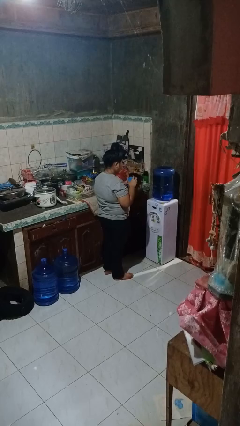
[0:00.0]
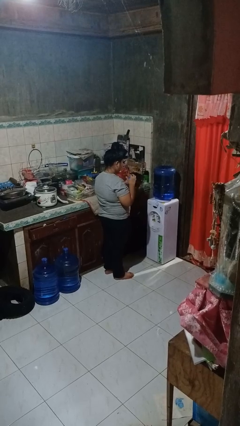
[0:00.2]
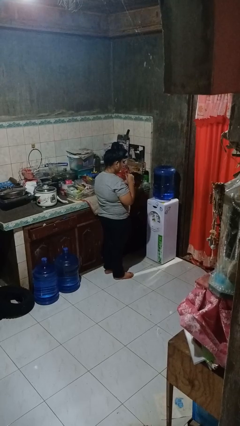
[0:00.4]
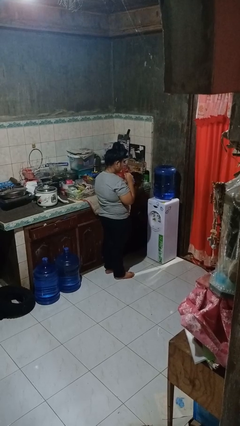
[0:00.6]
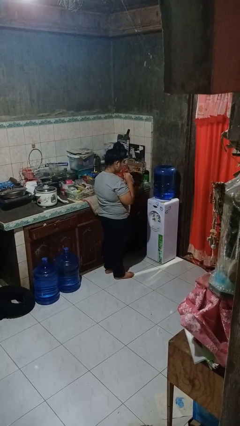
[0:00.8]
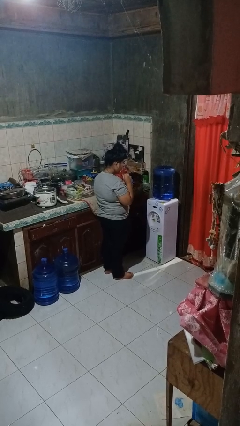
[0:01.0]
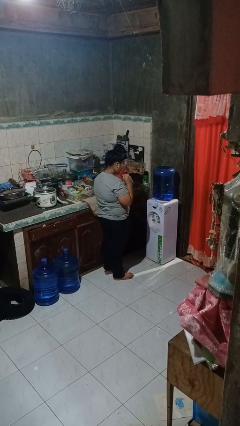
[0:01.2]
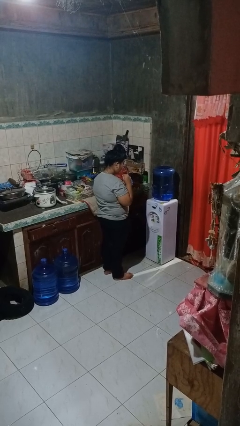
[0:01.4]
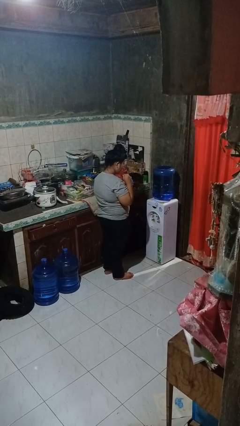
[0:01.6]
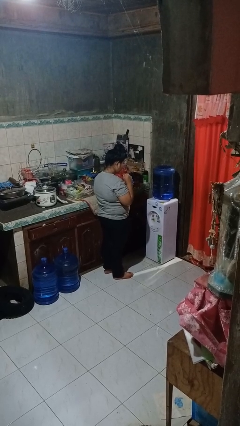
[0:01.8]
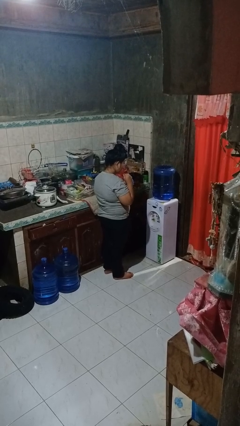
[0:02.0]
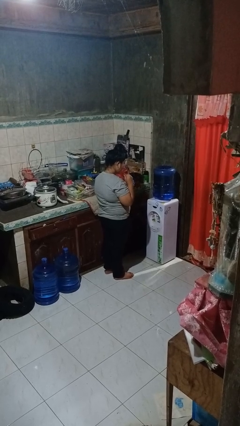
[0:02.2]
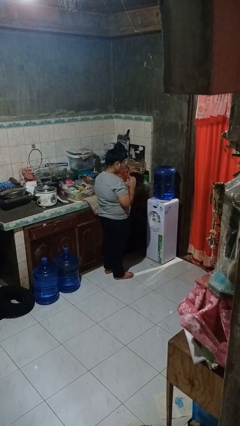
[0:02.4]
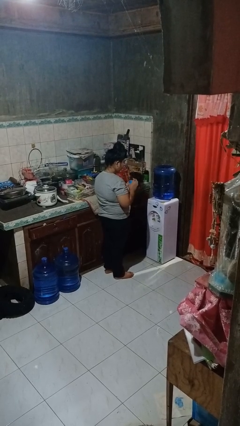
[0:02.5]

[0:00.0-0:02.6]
person drinks from straw

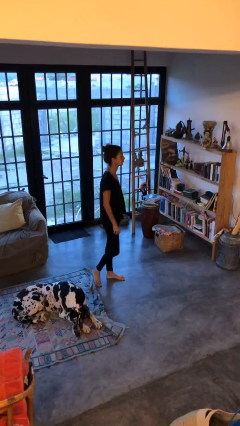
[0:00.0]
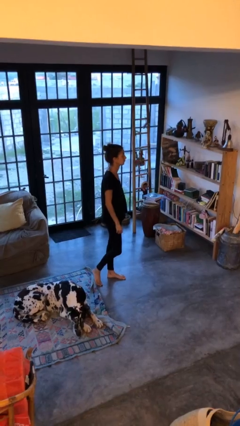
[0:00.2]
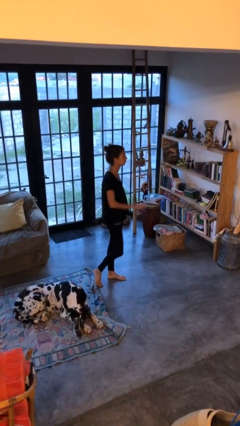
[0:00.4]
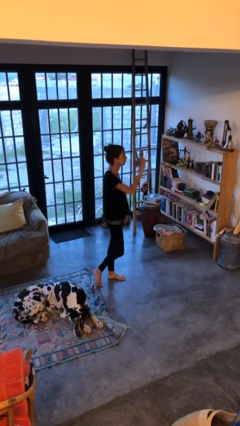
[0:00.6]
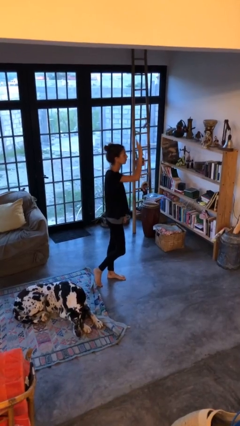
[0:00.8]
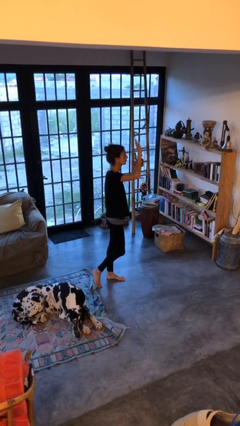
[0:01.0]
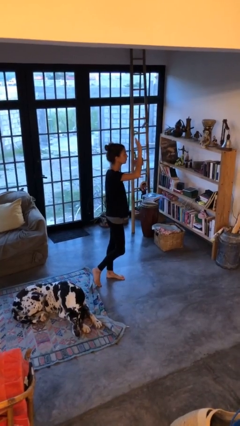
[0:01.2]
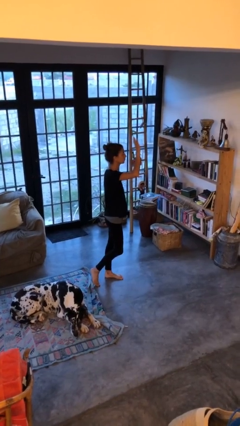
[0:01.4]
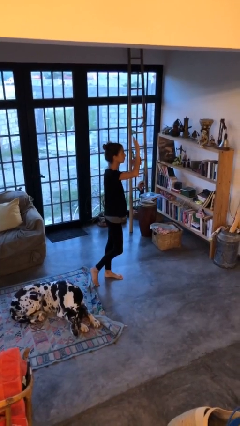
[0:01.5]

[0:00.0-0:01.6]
person gestures raise hand

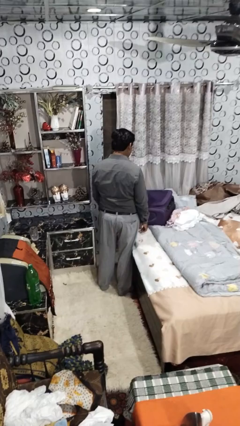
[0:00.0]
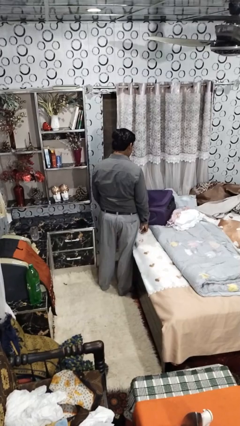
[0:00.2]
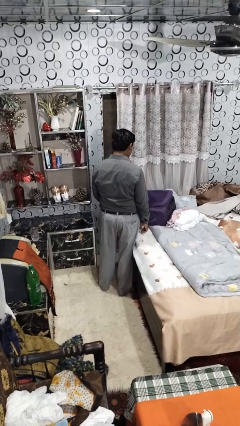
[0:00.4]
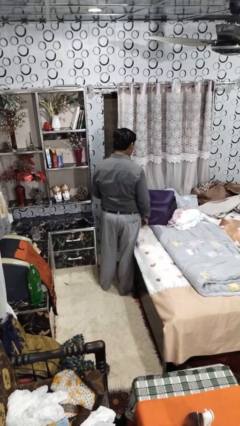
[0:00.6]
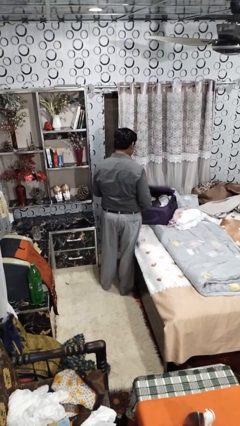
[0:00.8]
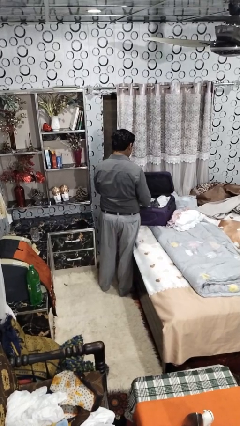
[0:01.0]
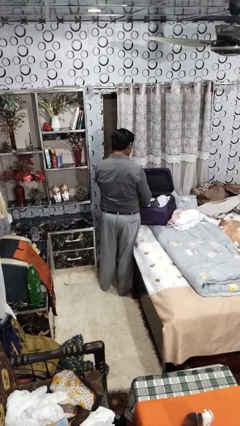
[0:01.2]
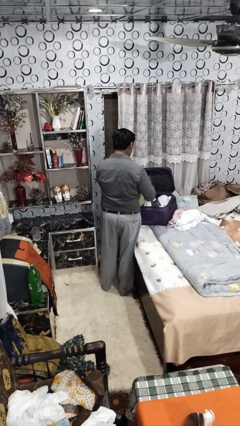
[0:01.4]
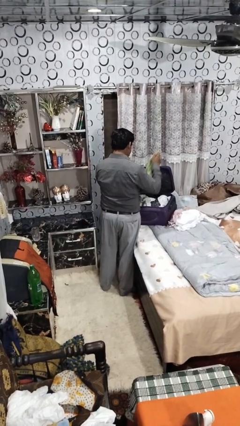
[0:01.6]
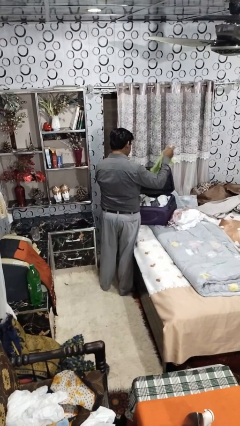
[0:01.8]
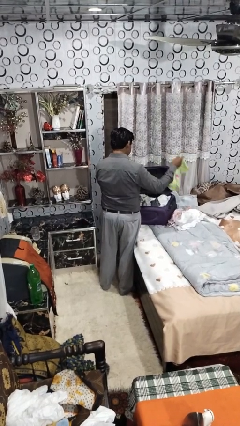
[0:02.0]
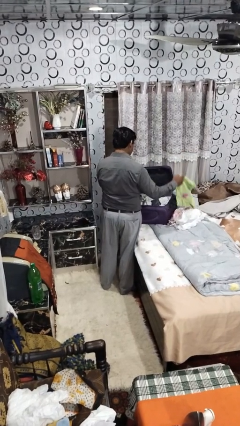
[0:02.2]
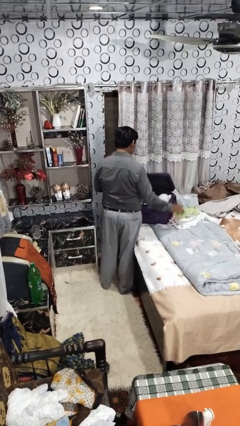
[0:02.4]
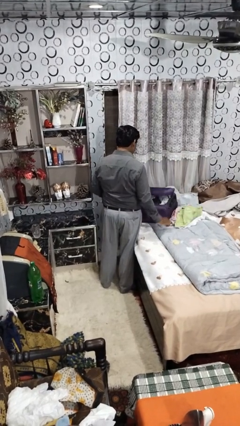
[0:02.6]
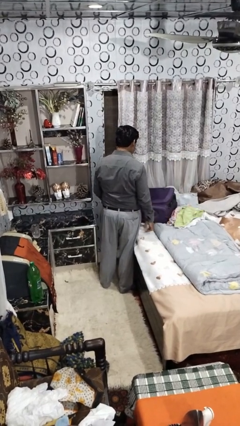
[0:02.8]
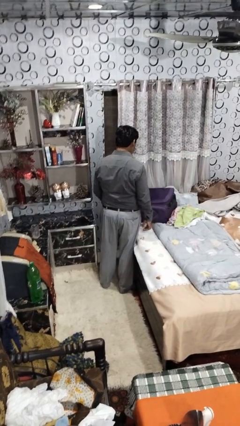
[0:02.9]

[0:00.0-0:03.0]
person unloads clothes from suitcase

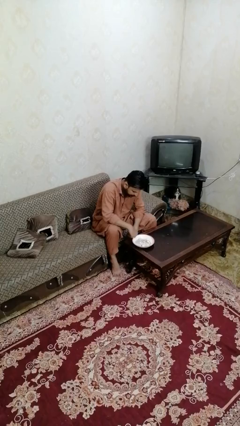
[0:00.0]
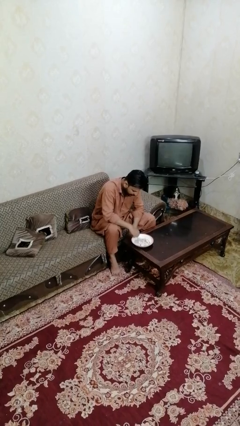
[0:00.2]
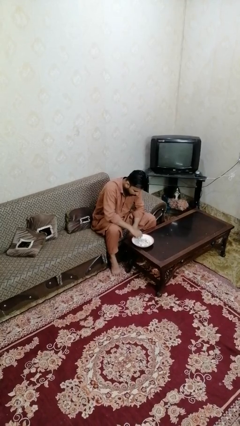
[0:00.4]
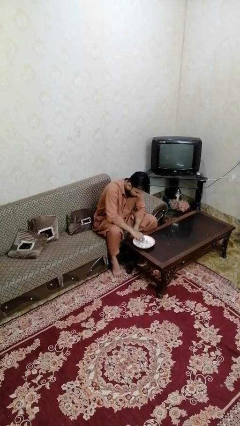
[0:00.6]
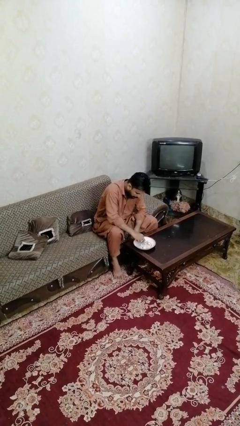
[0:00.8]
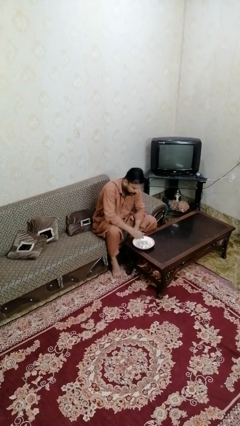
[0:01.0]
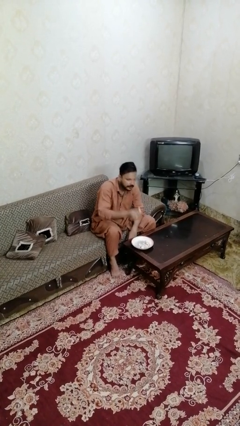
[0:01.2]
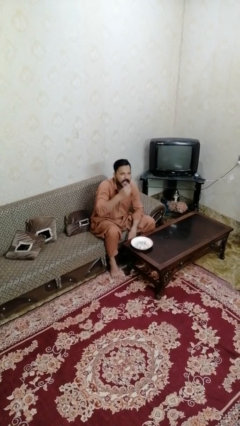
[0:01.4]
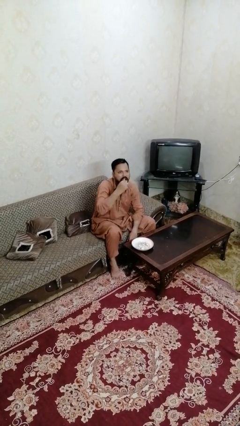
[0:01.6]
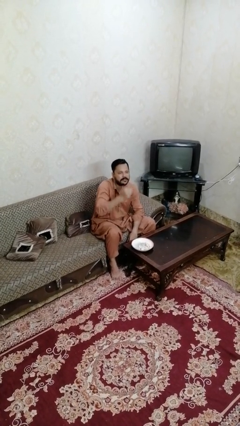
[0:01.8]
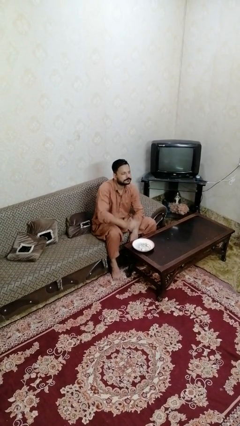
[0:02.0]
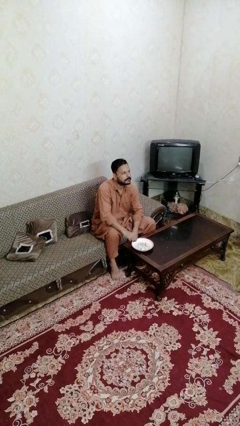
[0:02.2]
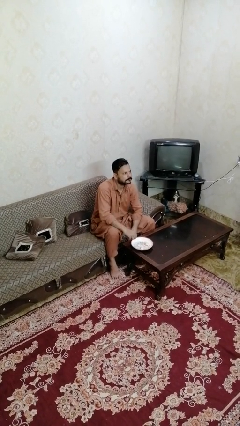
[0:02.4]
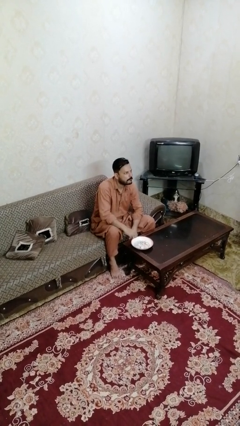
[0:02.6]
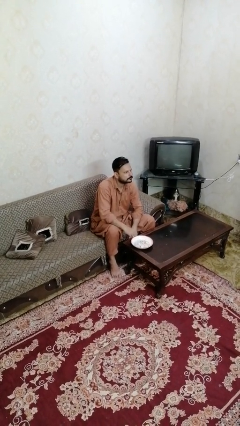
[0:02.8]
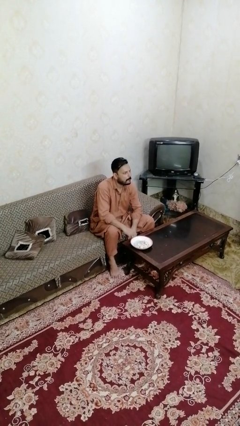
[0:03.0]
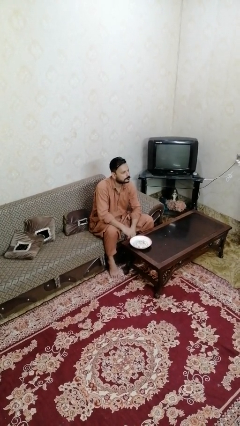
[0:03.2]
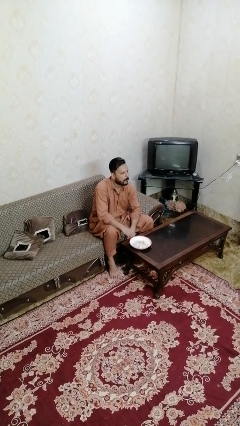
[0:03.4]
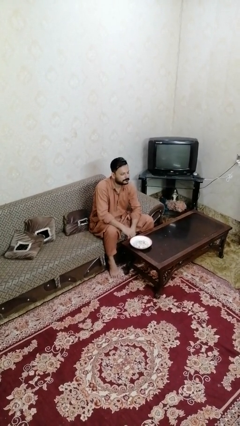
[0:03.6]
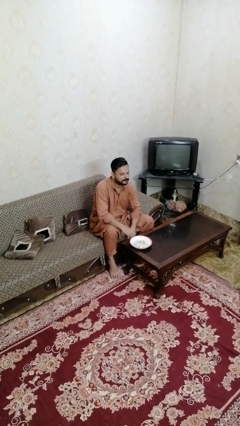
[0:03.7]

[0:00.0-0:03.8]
person eats with hands

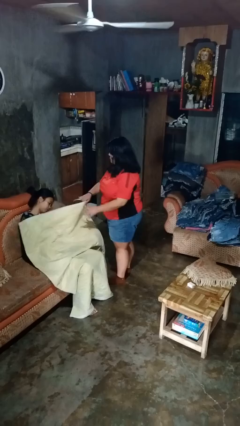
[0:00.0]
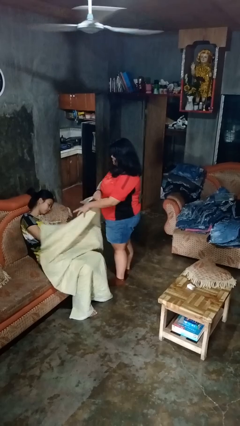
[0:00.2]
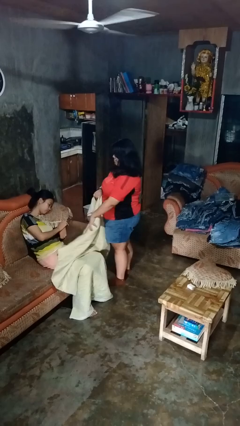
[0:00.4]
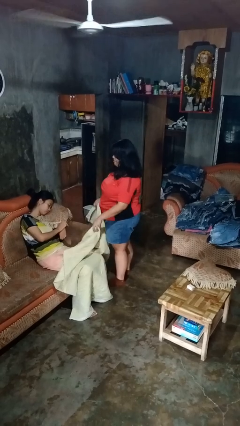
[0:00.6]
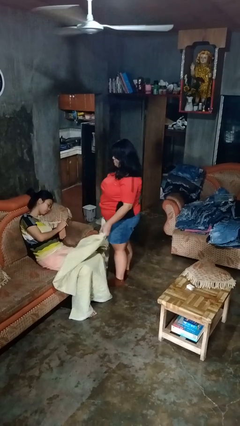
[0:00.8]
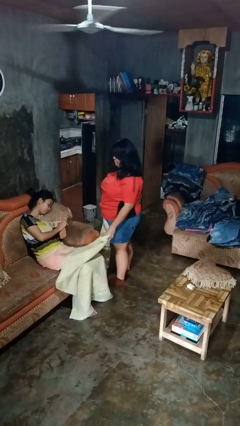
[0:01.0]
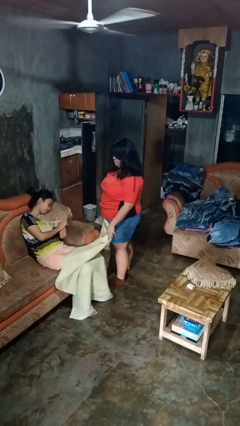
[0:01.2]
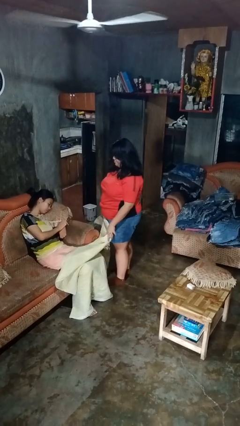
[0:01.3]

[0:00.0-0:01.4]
person uncovers friend with blanket

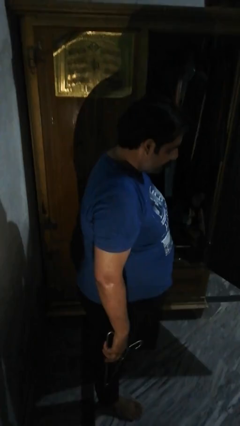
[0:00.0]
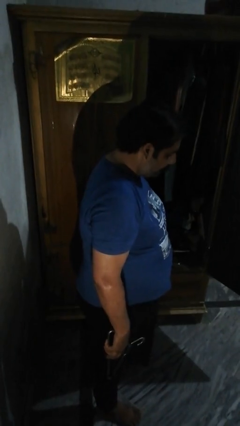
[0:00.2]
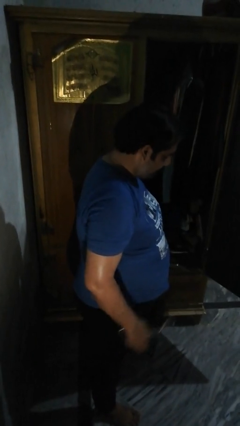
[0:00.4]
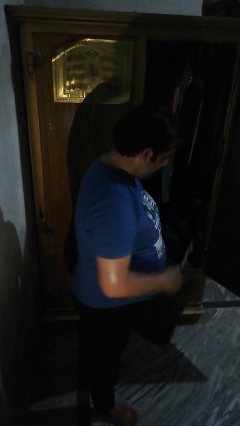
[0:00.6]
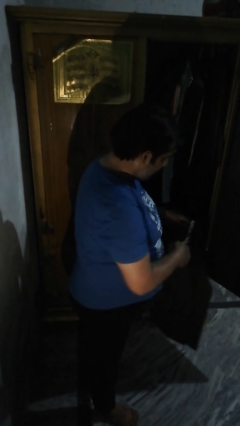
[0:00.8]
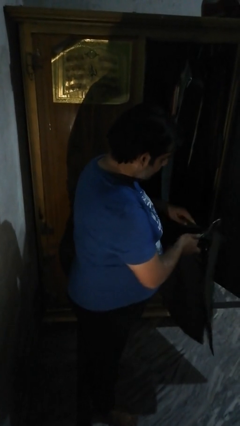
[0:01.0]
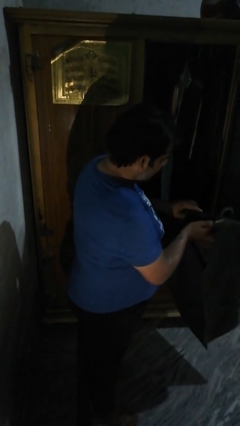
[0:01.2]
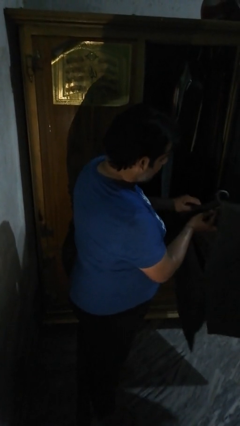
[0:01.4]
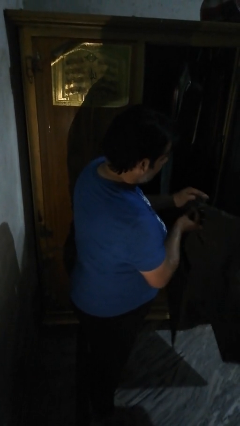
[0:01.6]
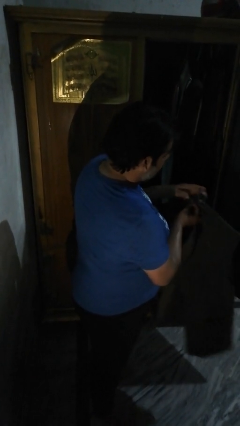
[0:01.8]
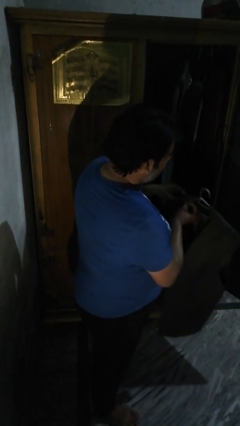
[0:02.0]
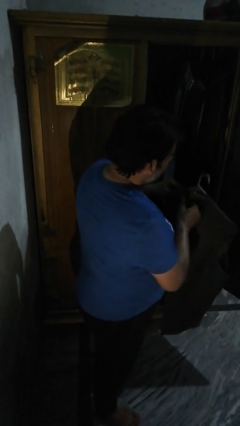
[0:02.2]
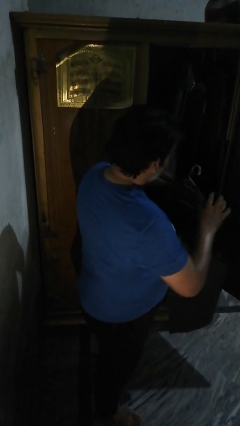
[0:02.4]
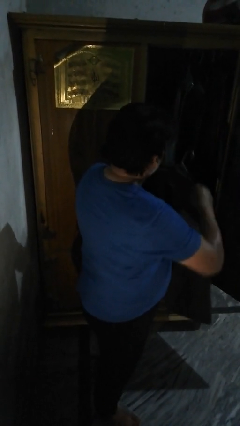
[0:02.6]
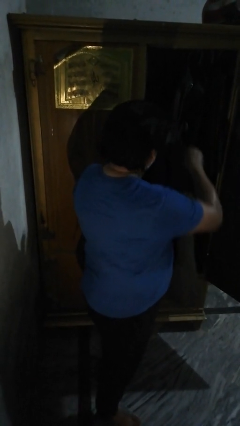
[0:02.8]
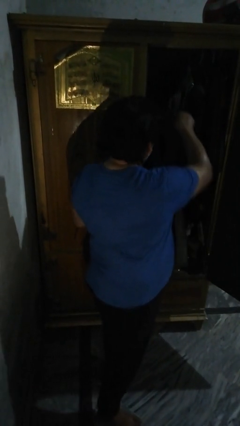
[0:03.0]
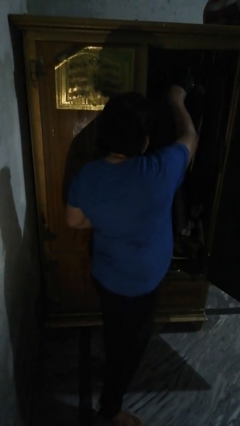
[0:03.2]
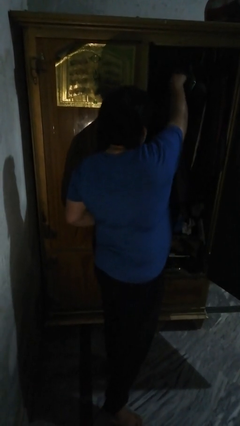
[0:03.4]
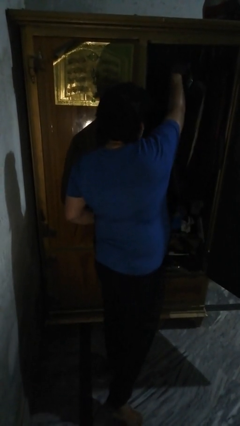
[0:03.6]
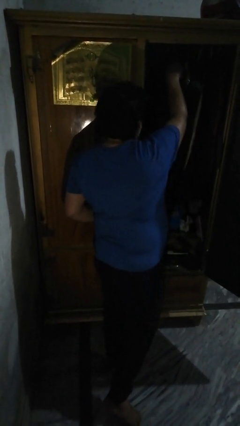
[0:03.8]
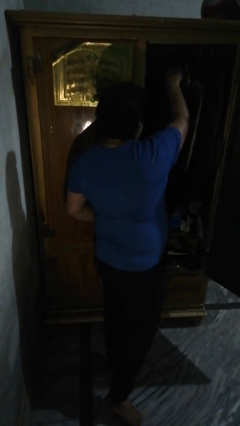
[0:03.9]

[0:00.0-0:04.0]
person puts clothes into closet

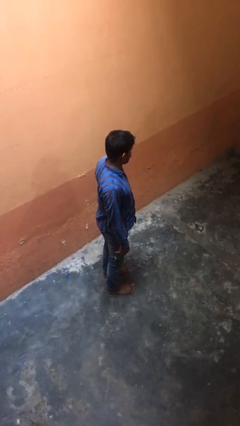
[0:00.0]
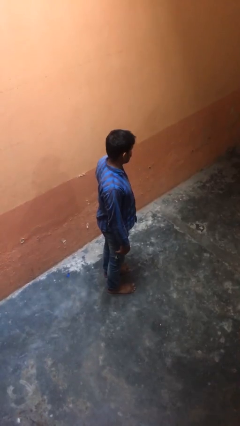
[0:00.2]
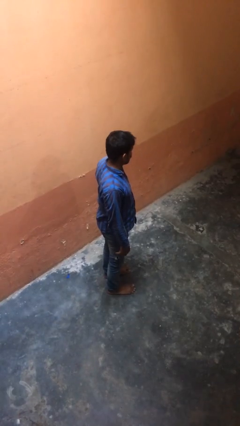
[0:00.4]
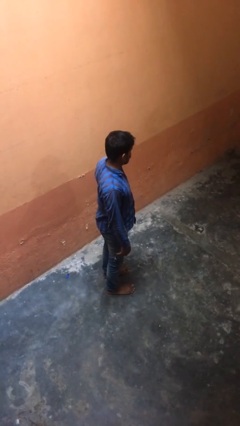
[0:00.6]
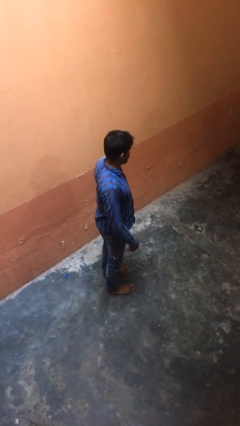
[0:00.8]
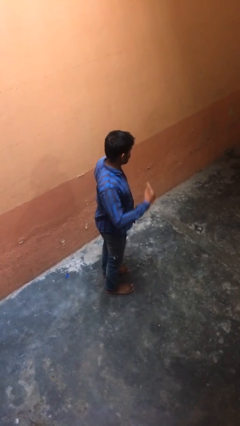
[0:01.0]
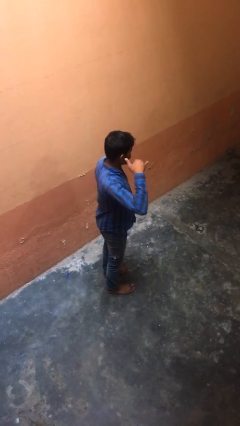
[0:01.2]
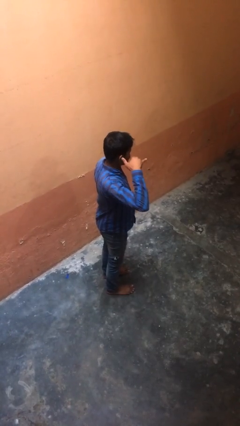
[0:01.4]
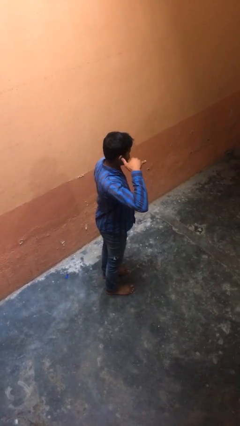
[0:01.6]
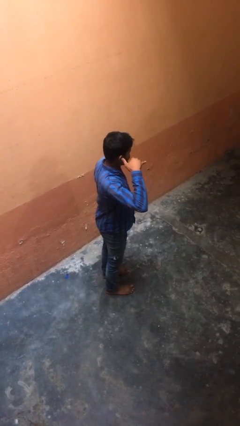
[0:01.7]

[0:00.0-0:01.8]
person gestures call me
